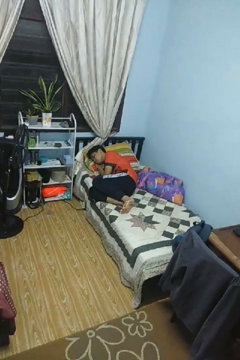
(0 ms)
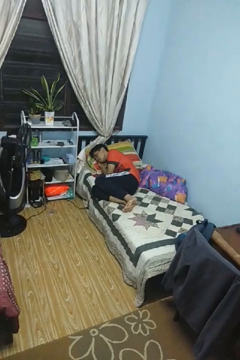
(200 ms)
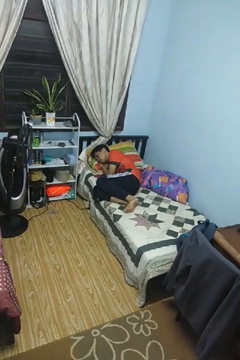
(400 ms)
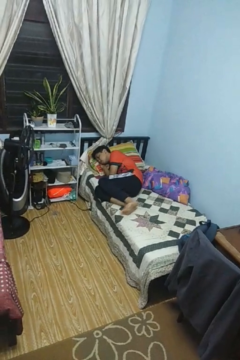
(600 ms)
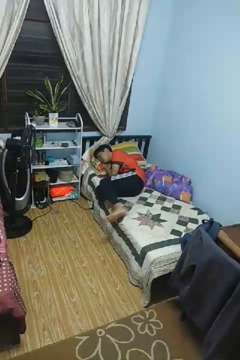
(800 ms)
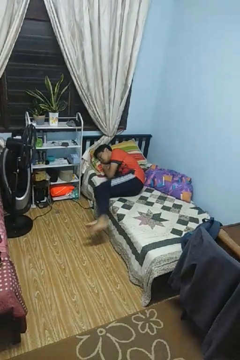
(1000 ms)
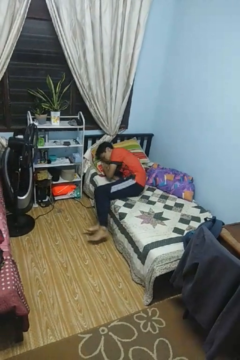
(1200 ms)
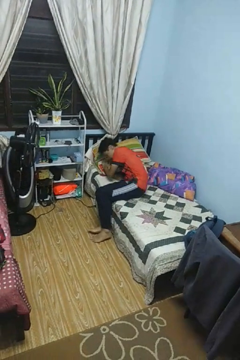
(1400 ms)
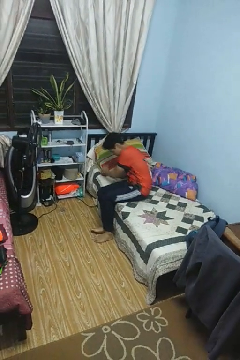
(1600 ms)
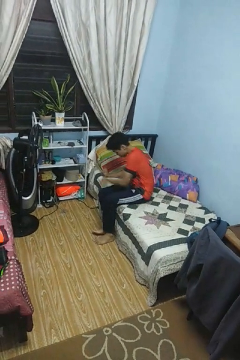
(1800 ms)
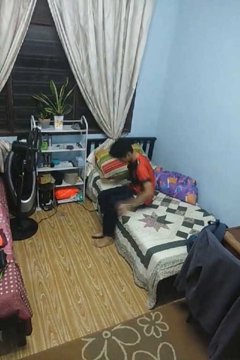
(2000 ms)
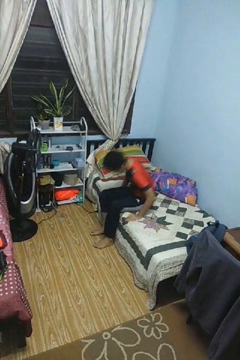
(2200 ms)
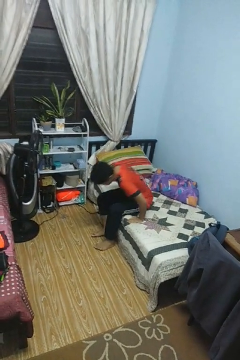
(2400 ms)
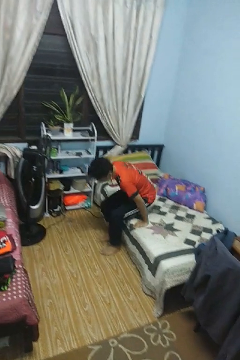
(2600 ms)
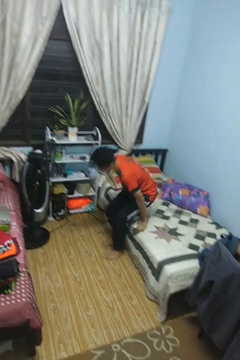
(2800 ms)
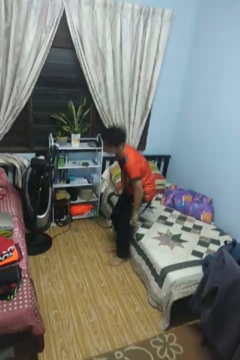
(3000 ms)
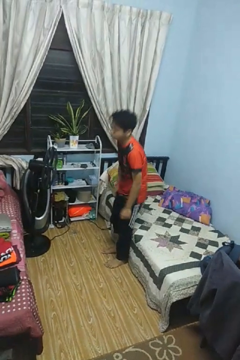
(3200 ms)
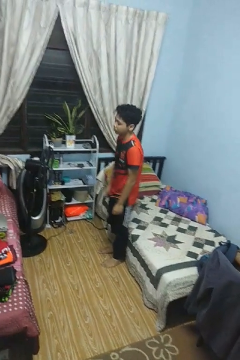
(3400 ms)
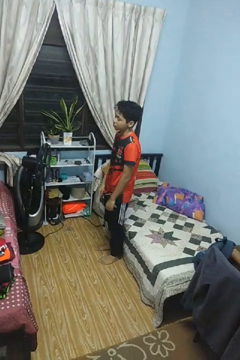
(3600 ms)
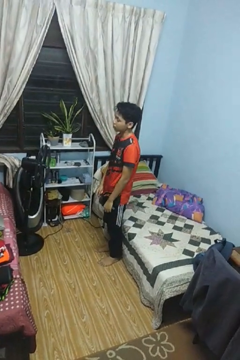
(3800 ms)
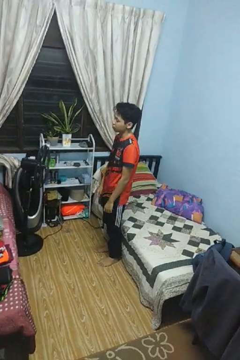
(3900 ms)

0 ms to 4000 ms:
person stands up

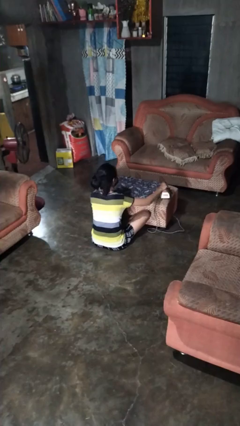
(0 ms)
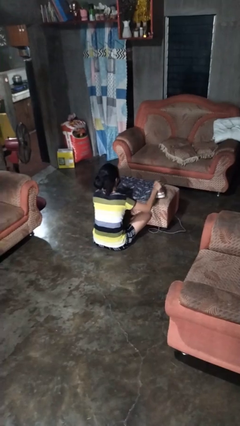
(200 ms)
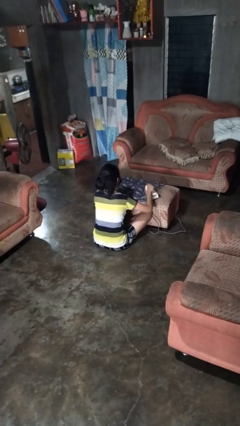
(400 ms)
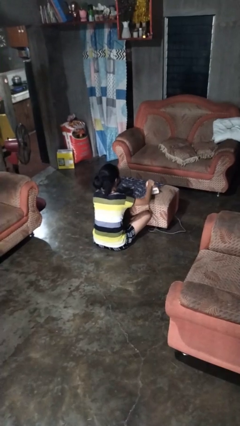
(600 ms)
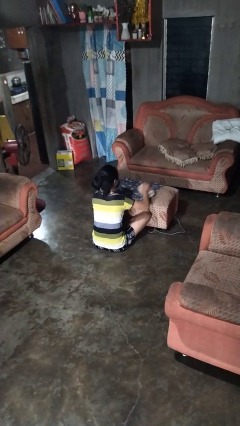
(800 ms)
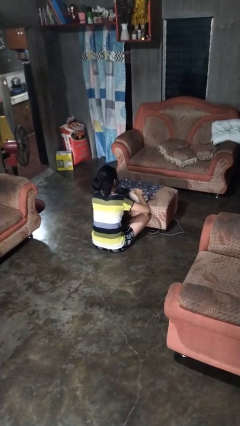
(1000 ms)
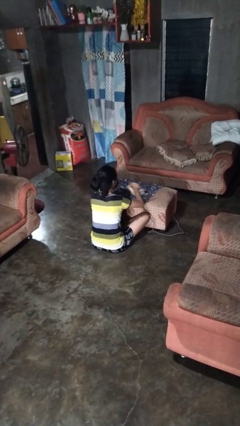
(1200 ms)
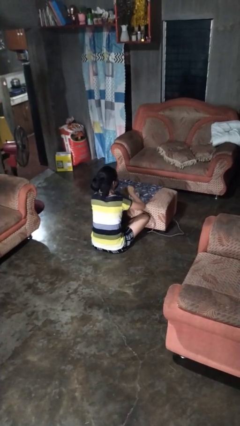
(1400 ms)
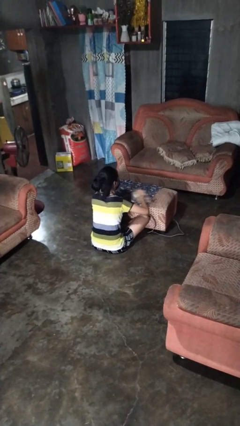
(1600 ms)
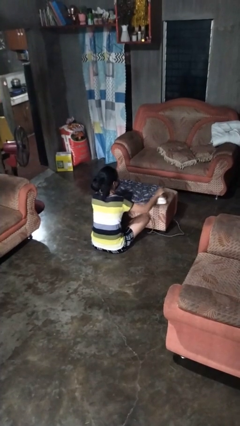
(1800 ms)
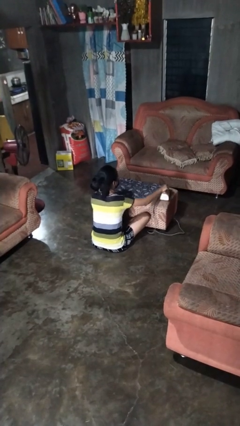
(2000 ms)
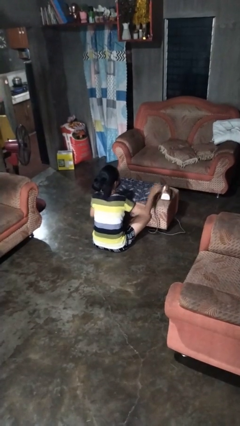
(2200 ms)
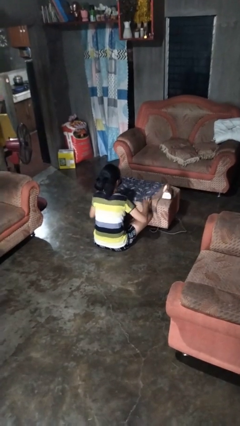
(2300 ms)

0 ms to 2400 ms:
person irons clothes

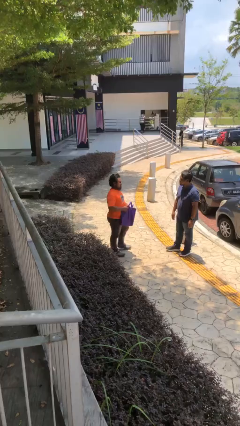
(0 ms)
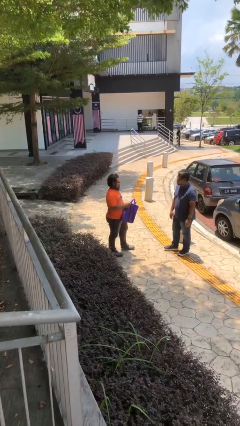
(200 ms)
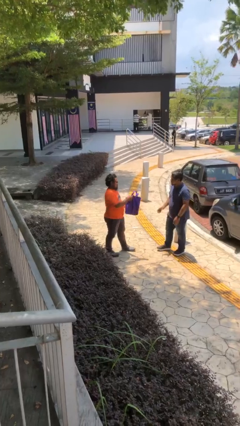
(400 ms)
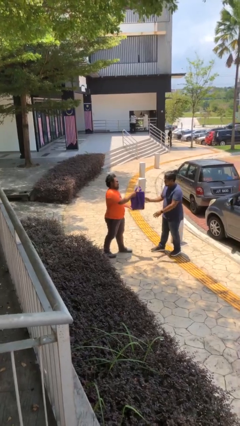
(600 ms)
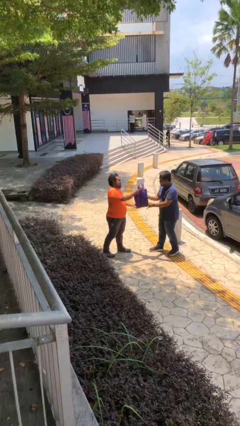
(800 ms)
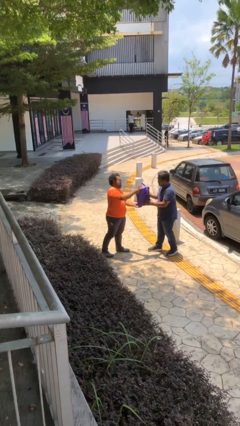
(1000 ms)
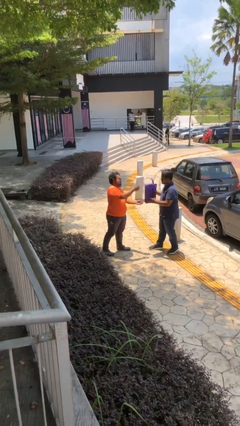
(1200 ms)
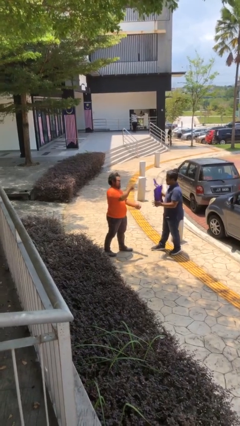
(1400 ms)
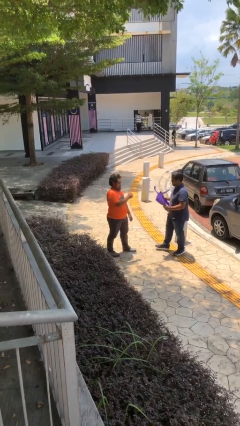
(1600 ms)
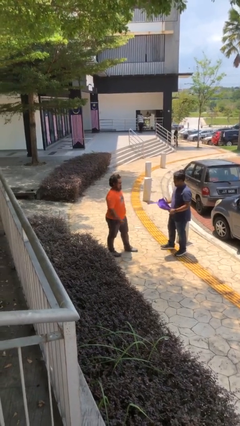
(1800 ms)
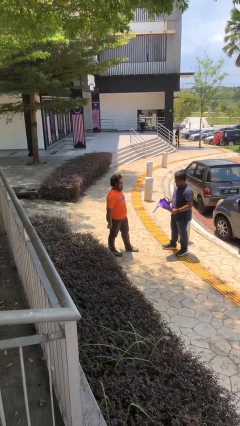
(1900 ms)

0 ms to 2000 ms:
person transfers object to person

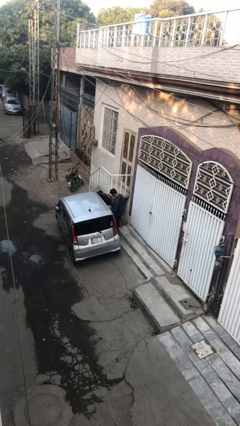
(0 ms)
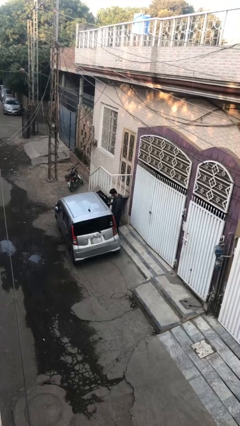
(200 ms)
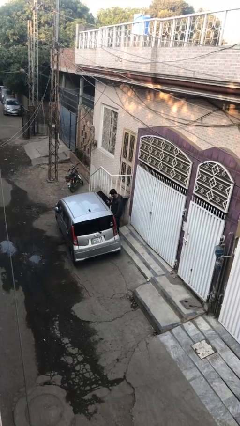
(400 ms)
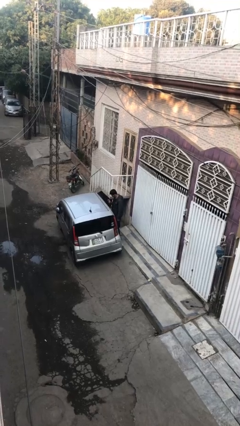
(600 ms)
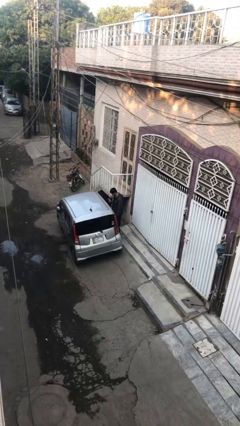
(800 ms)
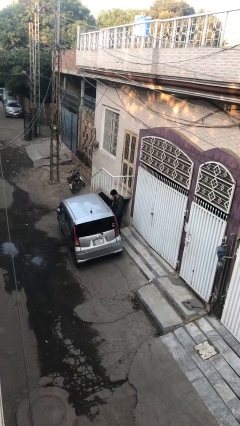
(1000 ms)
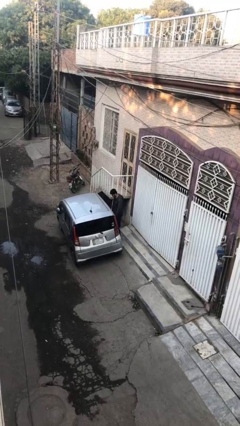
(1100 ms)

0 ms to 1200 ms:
person closes car door

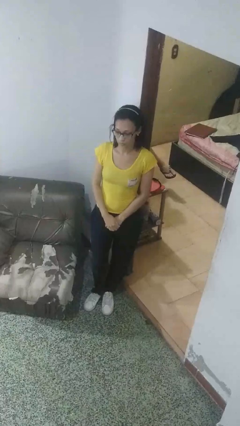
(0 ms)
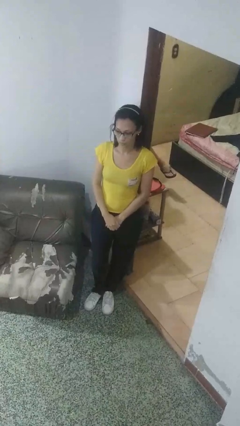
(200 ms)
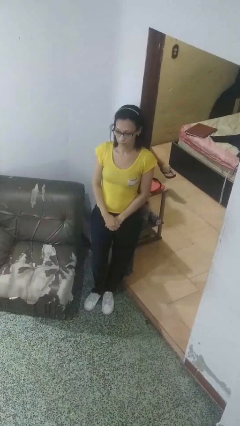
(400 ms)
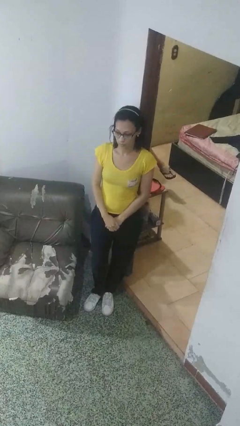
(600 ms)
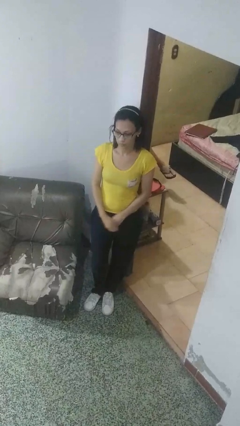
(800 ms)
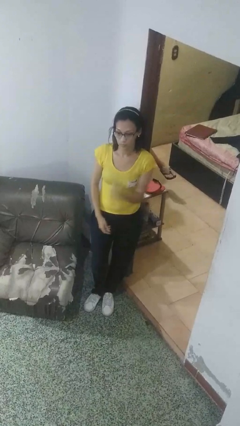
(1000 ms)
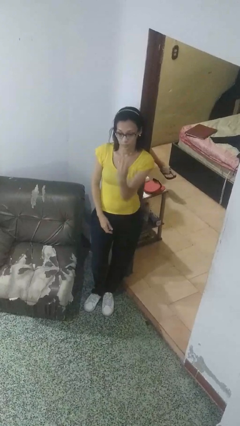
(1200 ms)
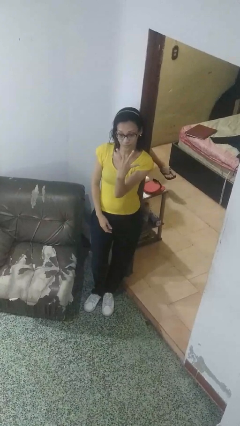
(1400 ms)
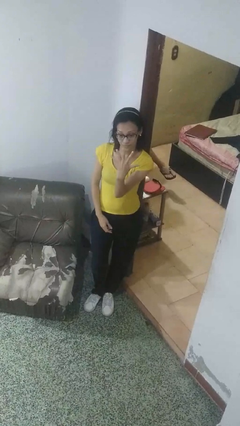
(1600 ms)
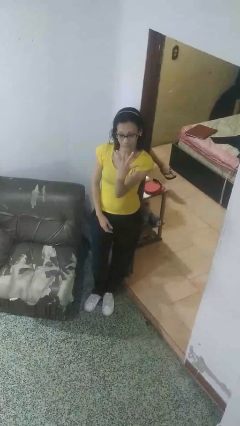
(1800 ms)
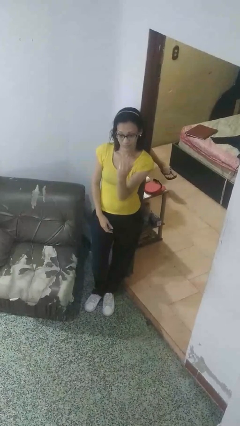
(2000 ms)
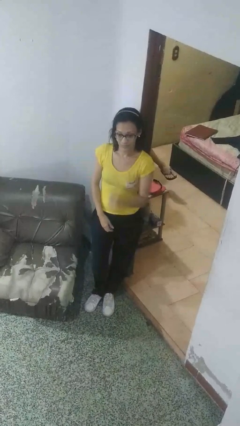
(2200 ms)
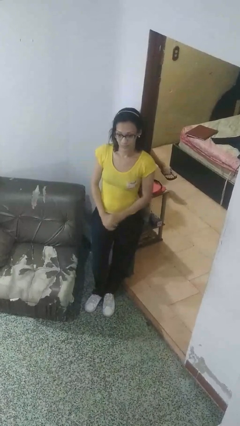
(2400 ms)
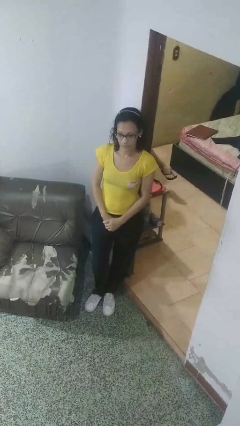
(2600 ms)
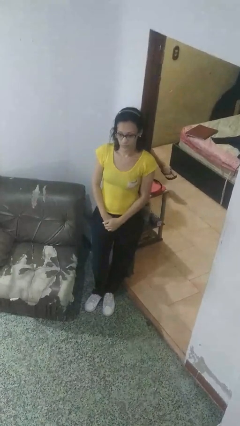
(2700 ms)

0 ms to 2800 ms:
person gestures number five

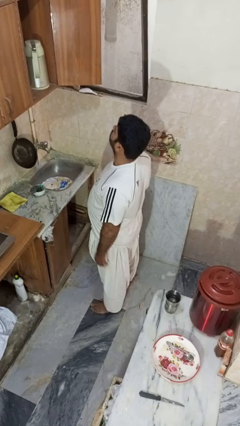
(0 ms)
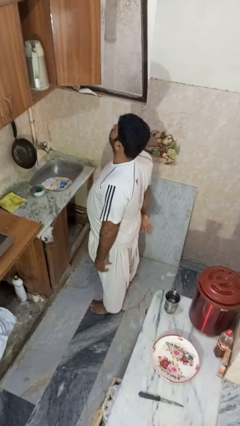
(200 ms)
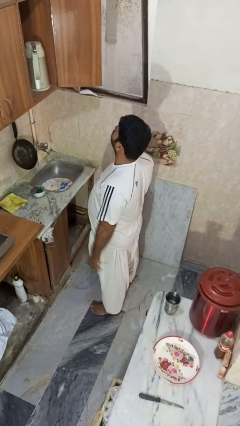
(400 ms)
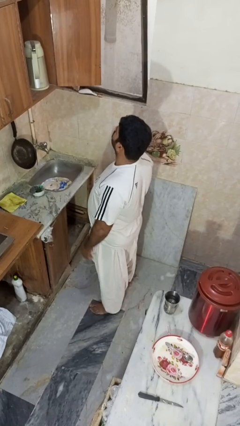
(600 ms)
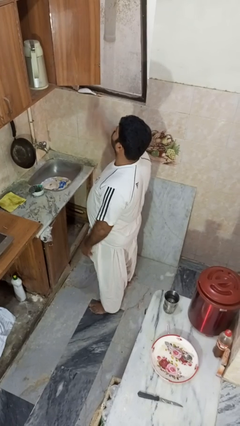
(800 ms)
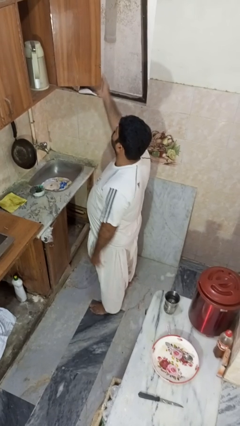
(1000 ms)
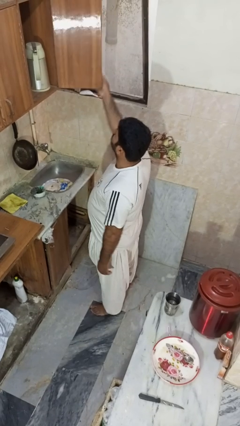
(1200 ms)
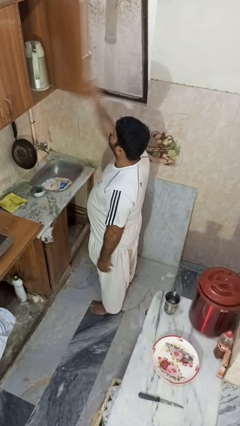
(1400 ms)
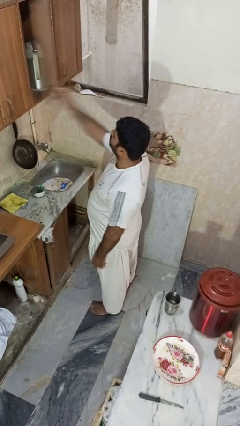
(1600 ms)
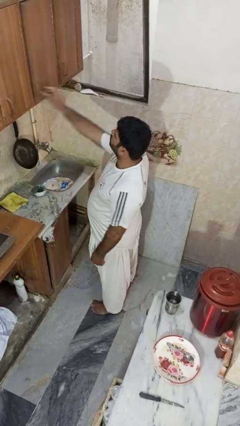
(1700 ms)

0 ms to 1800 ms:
person closes cabinet

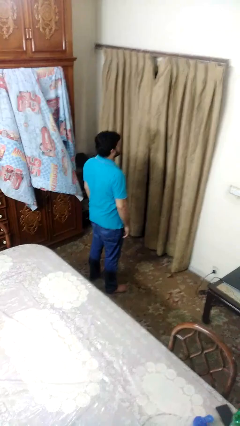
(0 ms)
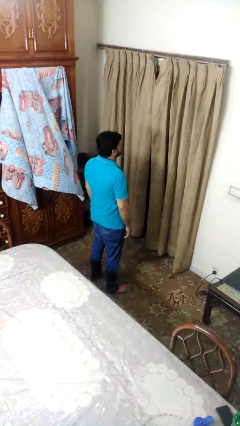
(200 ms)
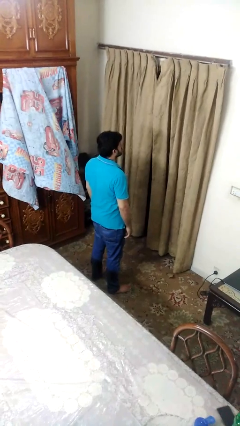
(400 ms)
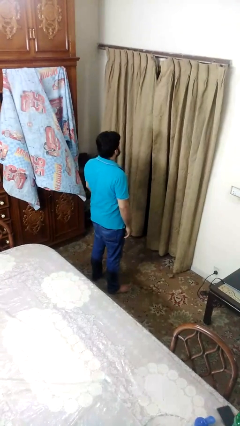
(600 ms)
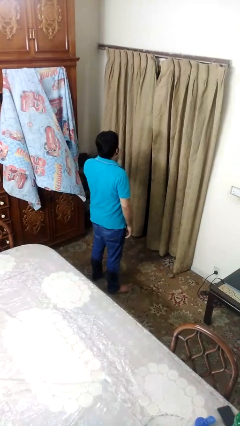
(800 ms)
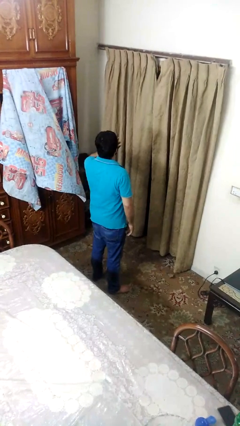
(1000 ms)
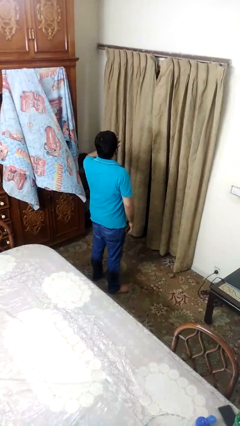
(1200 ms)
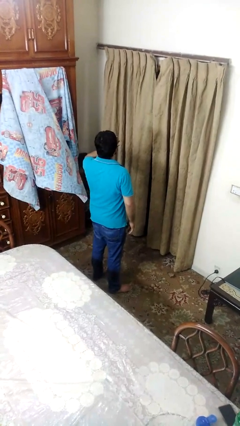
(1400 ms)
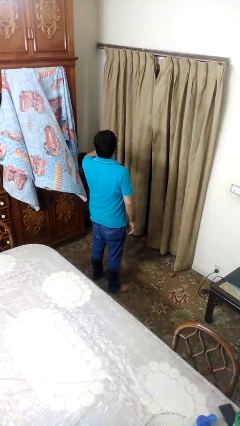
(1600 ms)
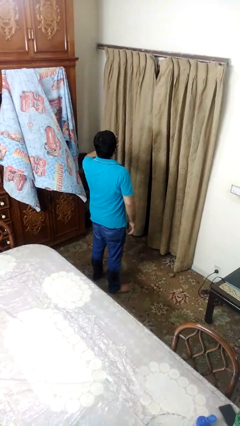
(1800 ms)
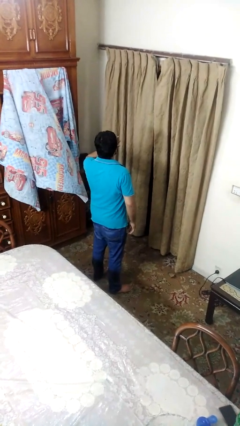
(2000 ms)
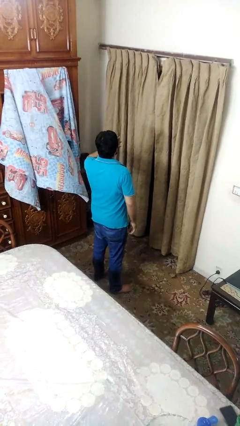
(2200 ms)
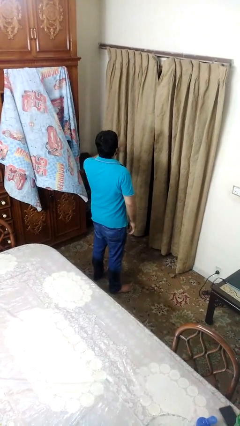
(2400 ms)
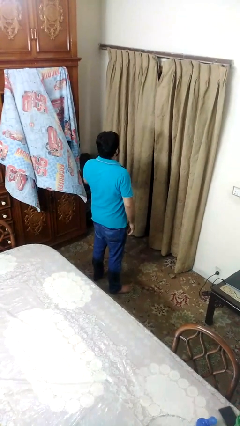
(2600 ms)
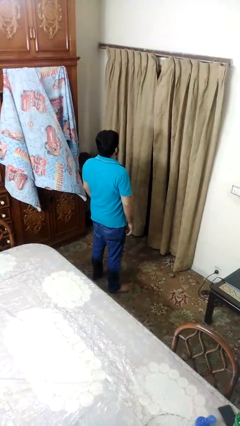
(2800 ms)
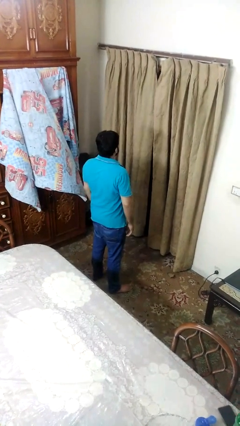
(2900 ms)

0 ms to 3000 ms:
person yawns

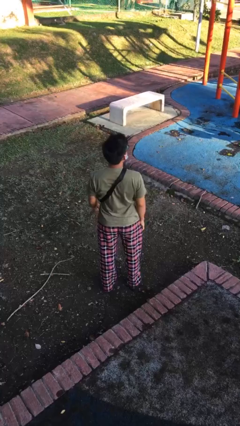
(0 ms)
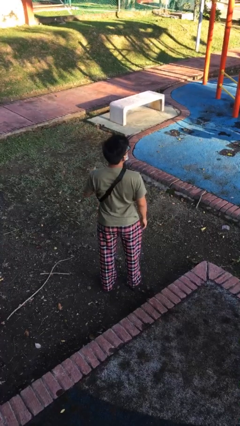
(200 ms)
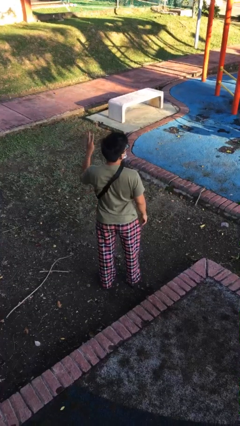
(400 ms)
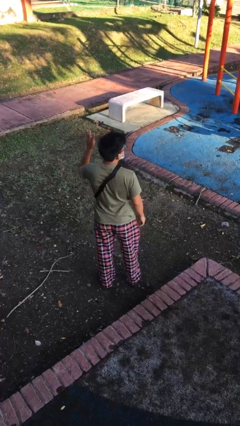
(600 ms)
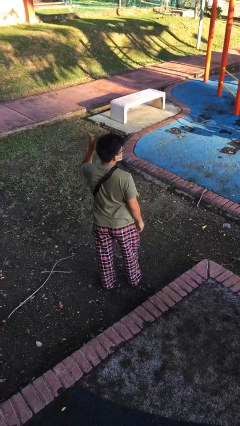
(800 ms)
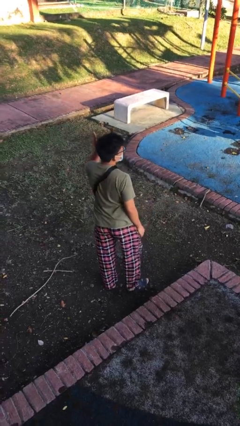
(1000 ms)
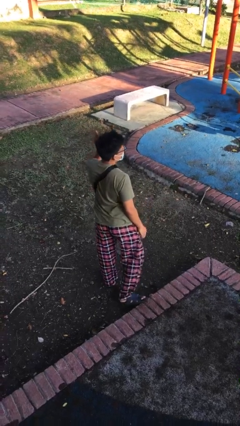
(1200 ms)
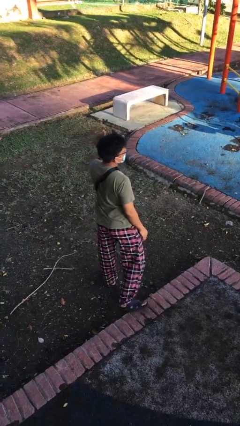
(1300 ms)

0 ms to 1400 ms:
person gestures number three
